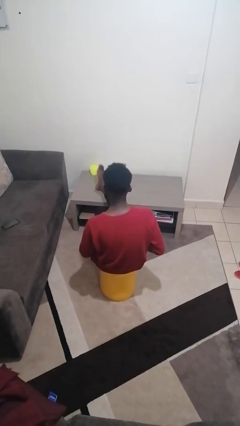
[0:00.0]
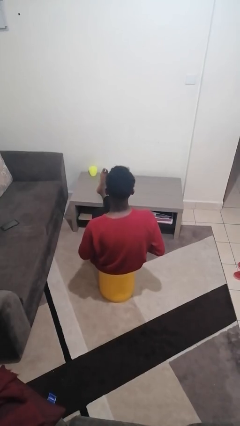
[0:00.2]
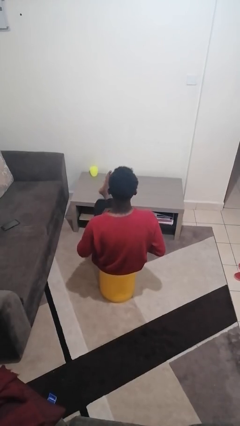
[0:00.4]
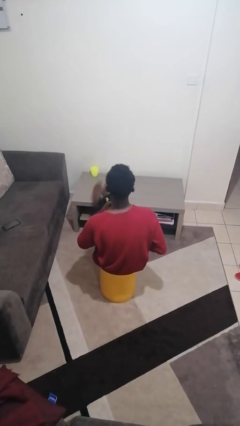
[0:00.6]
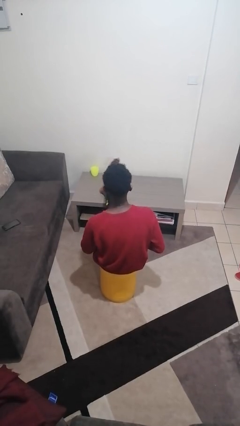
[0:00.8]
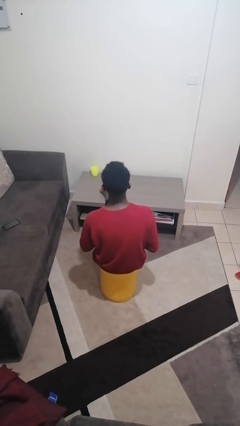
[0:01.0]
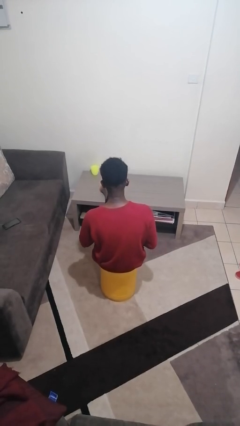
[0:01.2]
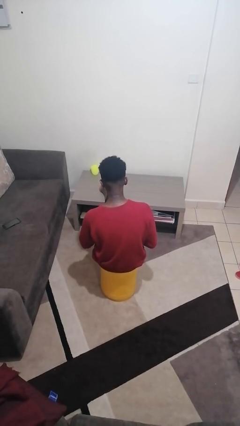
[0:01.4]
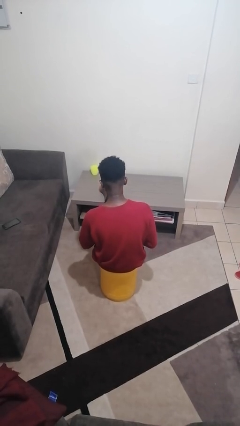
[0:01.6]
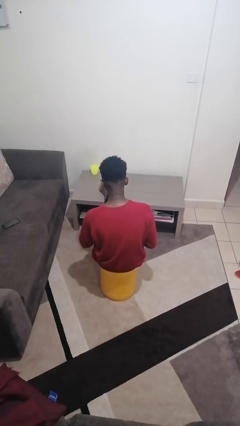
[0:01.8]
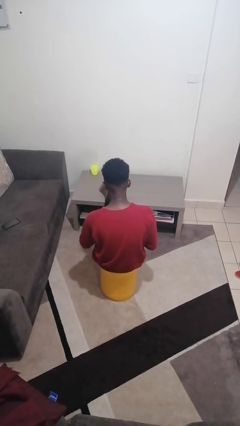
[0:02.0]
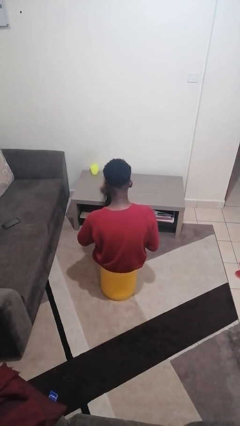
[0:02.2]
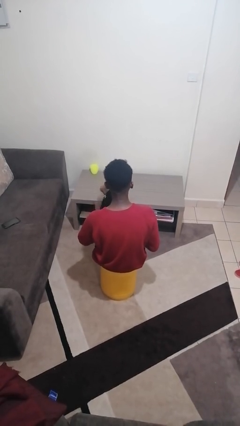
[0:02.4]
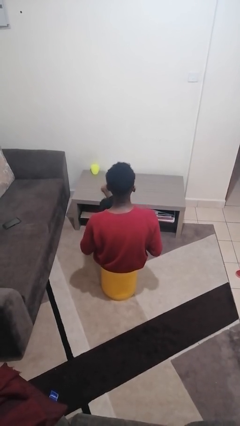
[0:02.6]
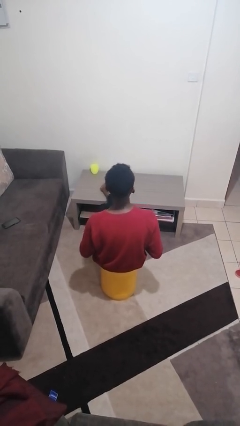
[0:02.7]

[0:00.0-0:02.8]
person puts feet up

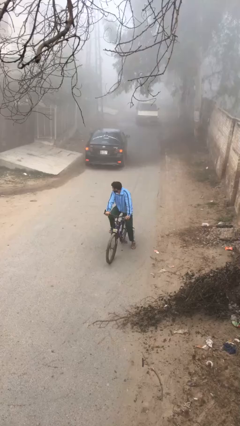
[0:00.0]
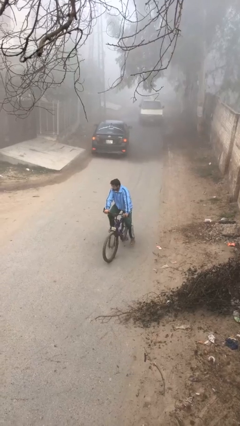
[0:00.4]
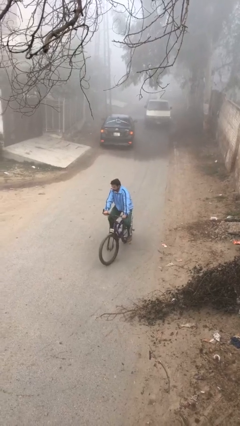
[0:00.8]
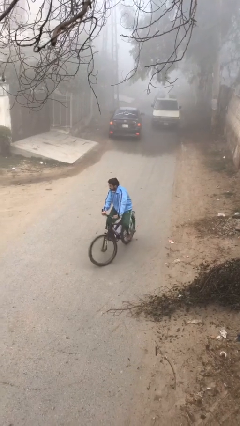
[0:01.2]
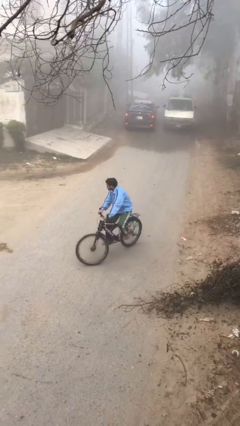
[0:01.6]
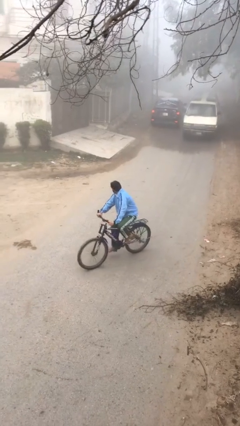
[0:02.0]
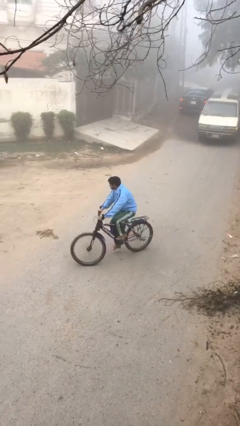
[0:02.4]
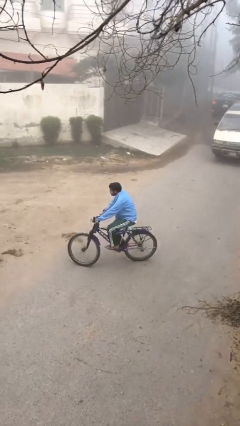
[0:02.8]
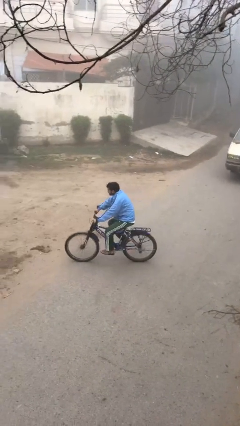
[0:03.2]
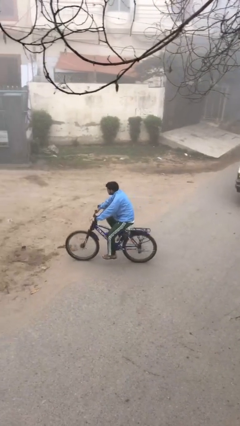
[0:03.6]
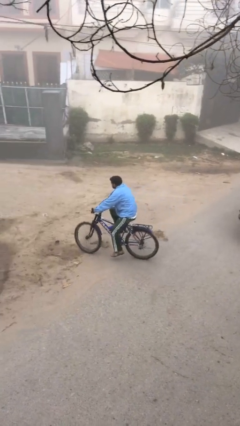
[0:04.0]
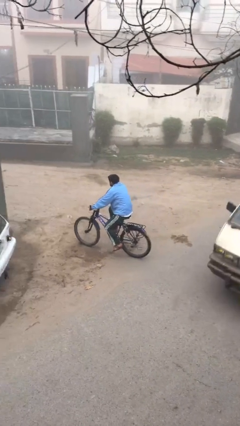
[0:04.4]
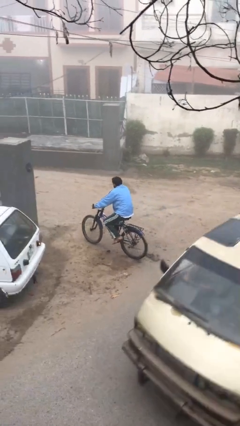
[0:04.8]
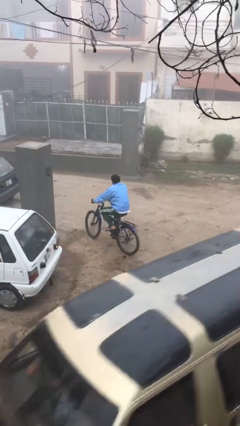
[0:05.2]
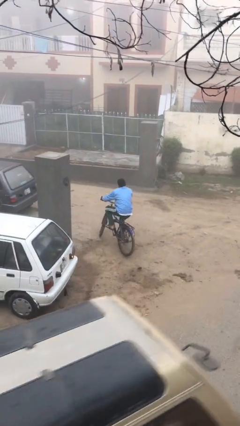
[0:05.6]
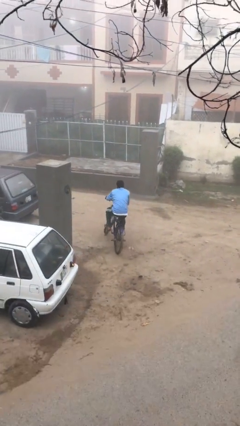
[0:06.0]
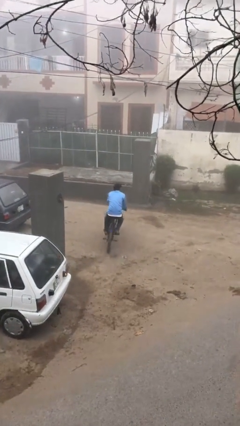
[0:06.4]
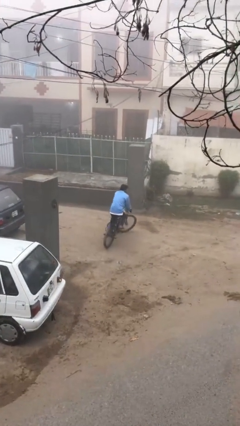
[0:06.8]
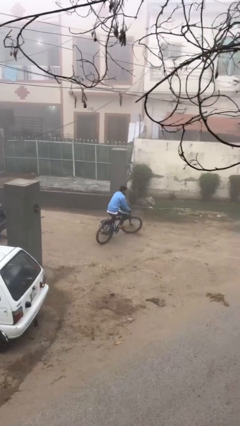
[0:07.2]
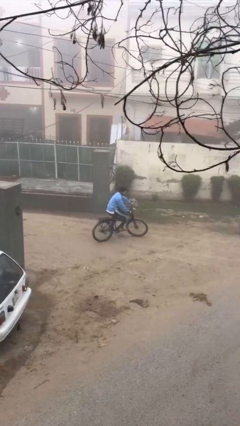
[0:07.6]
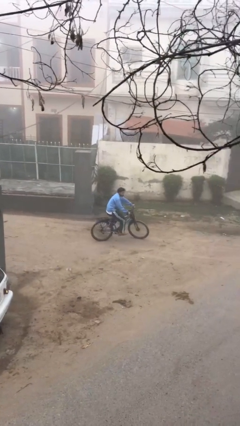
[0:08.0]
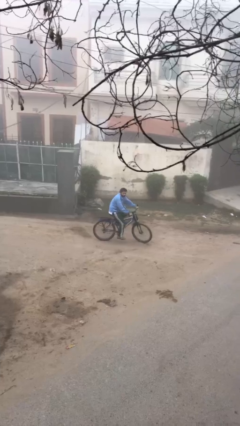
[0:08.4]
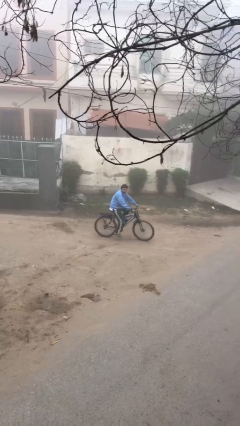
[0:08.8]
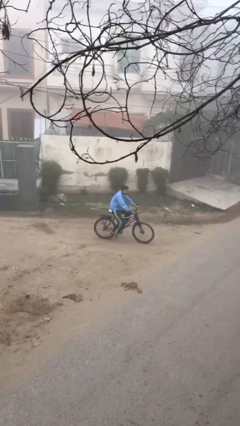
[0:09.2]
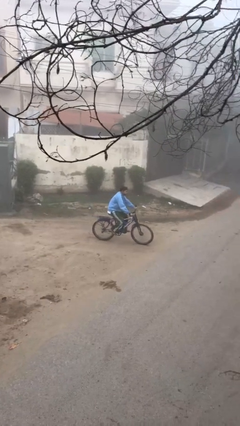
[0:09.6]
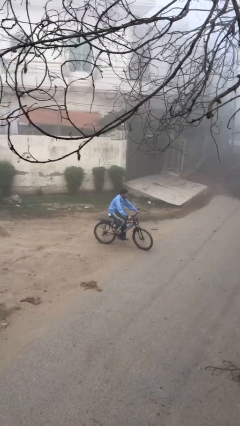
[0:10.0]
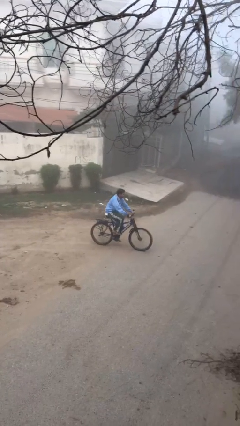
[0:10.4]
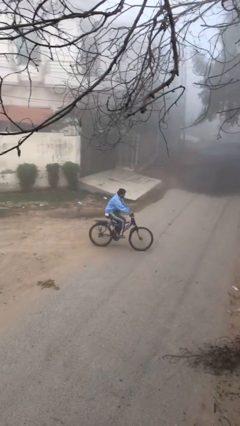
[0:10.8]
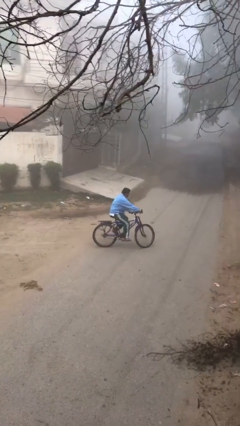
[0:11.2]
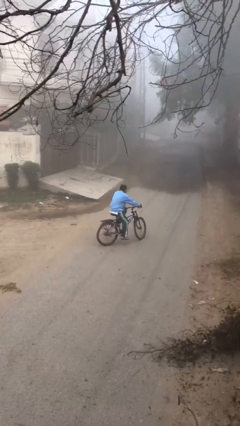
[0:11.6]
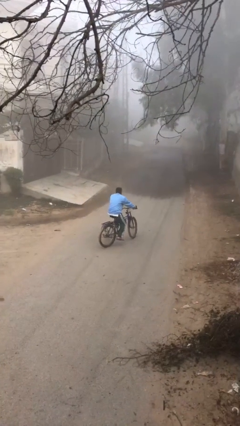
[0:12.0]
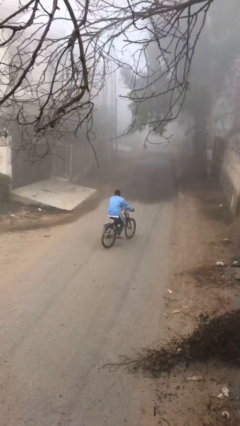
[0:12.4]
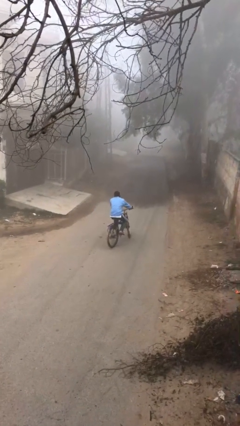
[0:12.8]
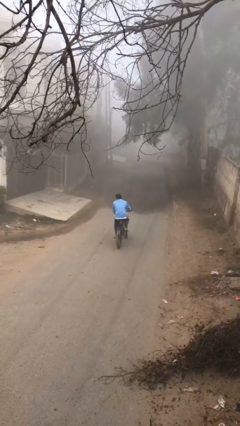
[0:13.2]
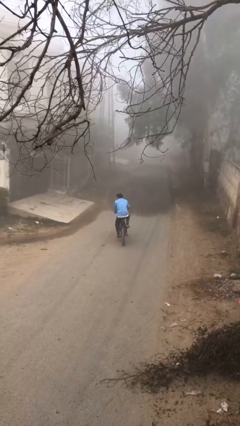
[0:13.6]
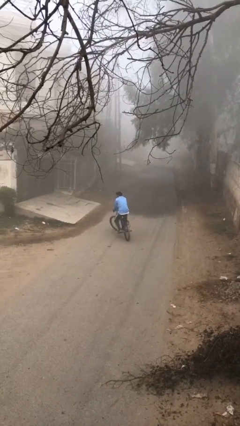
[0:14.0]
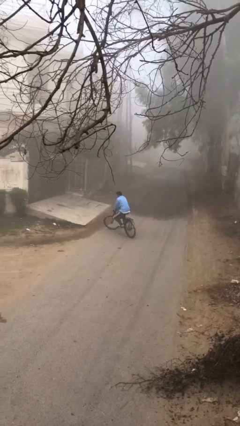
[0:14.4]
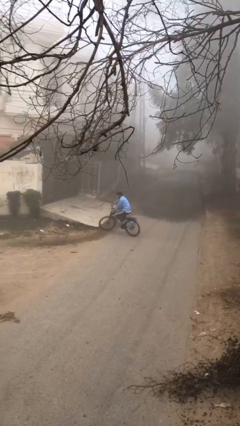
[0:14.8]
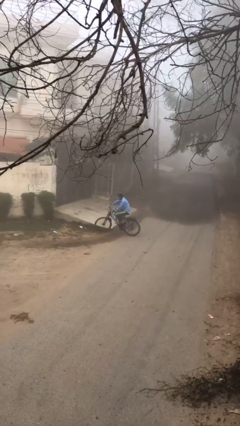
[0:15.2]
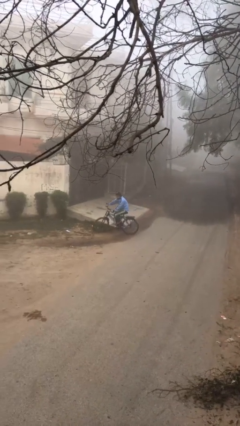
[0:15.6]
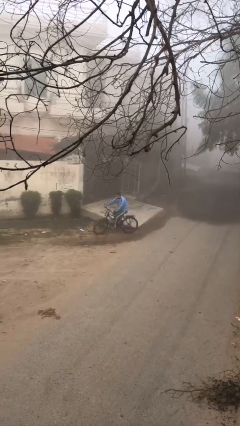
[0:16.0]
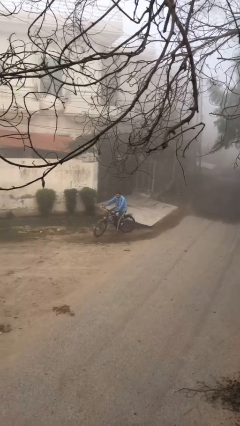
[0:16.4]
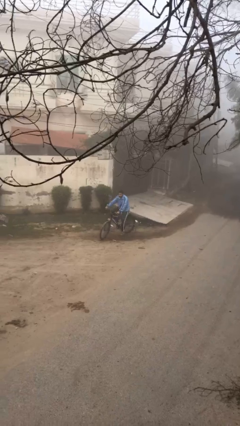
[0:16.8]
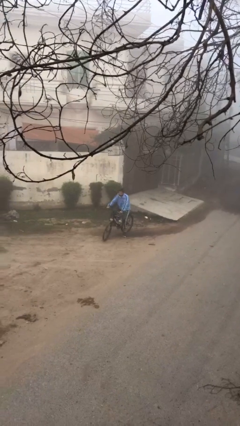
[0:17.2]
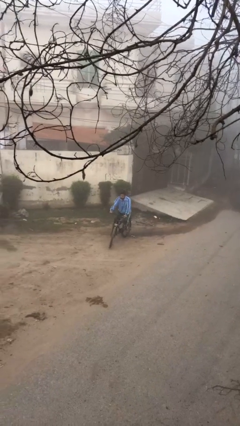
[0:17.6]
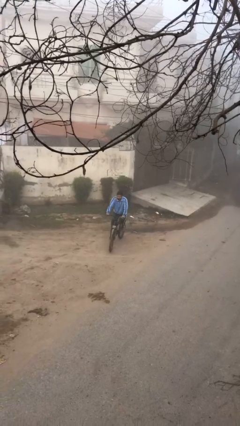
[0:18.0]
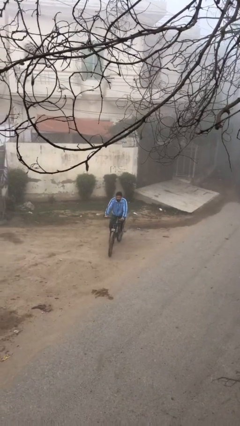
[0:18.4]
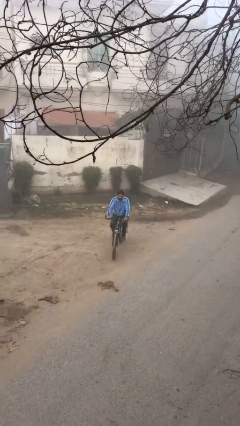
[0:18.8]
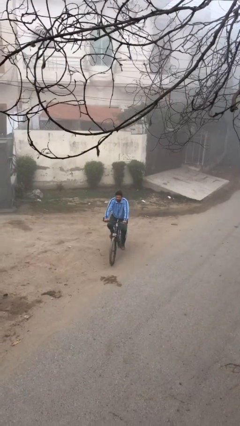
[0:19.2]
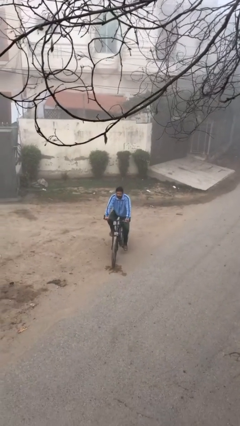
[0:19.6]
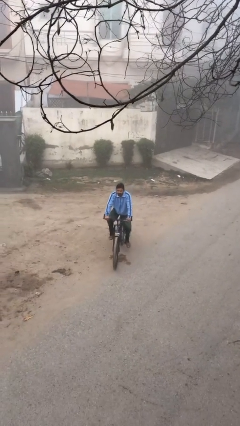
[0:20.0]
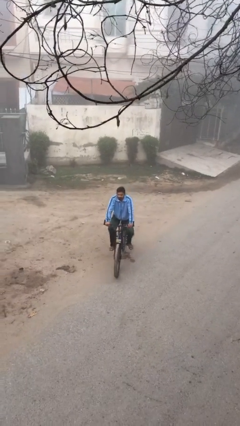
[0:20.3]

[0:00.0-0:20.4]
person rides bicycle

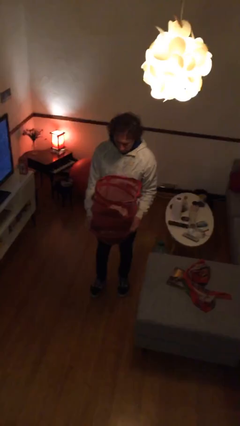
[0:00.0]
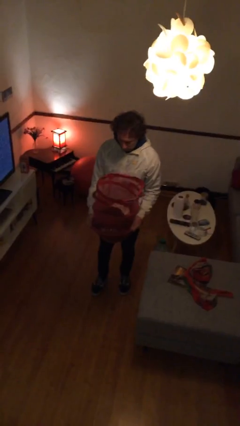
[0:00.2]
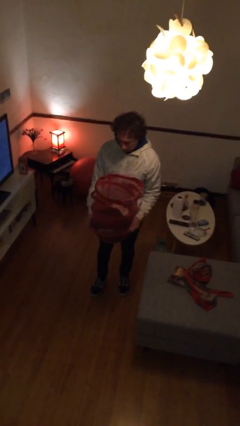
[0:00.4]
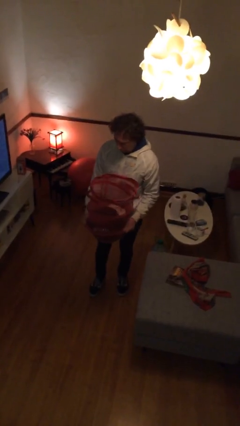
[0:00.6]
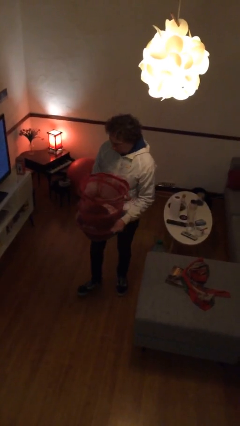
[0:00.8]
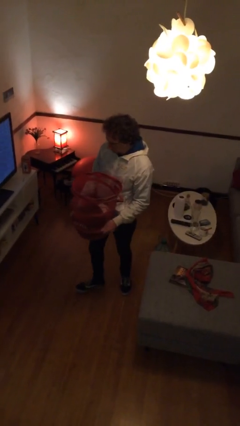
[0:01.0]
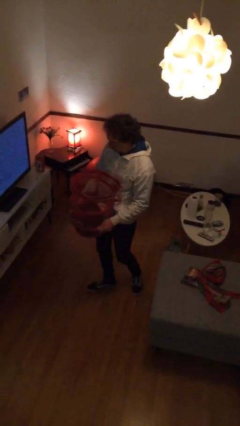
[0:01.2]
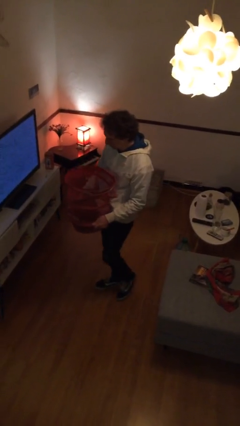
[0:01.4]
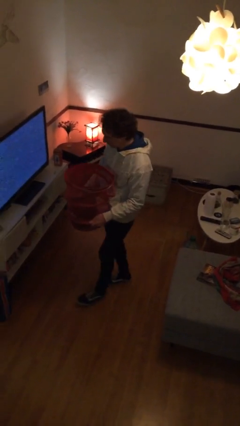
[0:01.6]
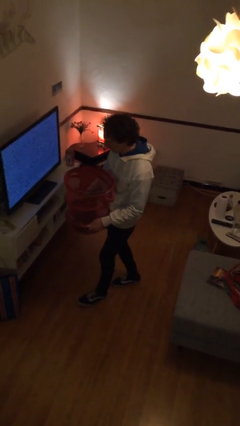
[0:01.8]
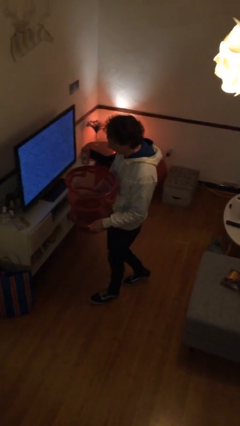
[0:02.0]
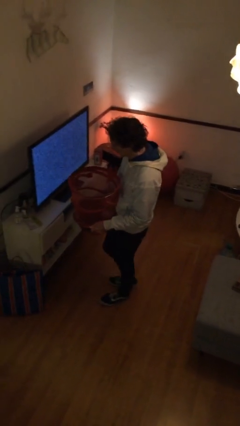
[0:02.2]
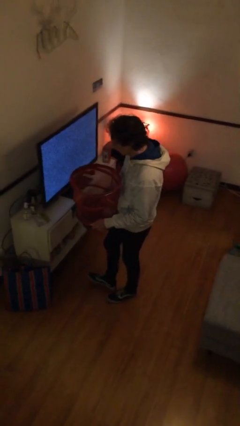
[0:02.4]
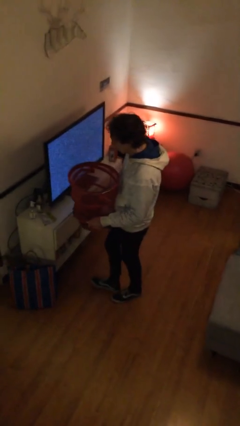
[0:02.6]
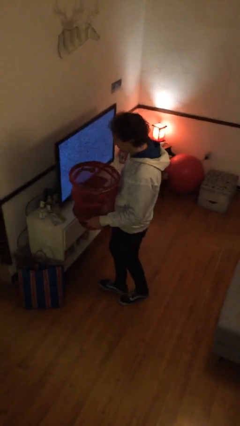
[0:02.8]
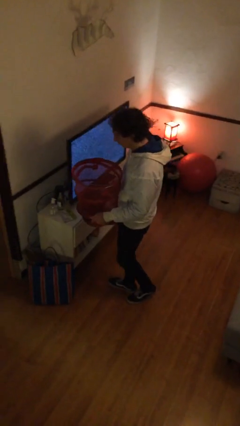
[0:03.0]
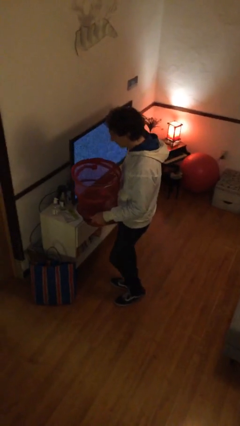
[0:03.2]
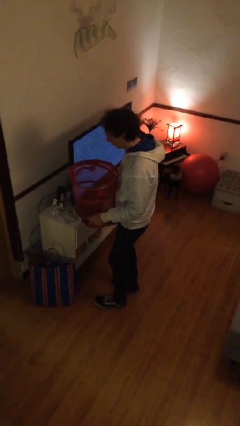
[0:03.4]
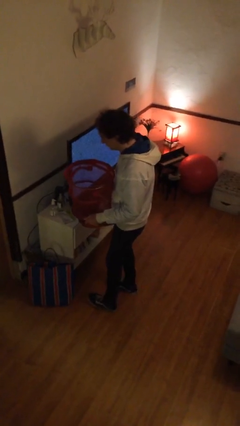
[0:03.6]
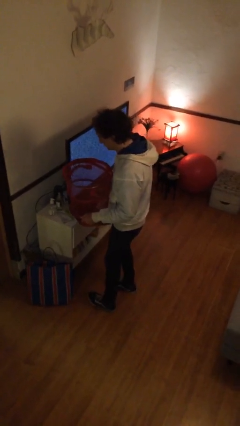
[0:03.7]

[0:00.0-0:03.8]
person carries laundry basket

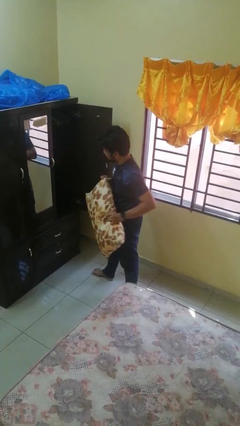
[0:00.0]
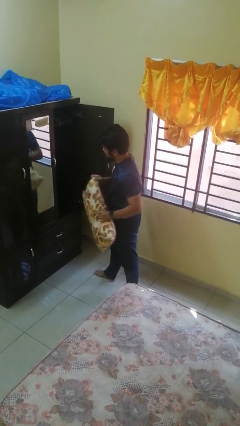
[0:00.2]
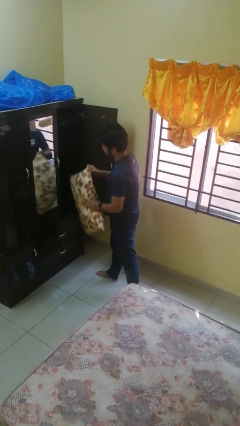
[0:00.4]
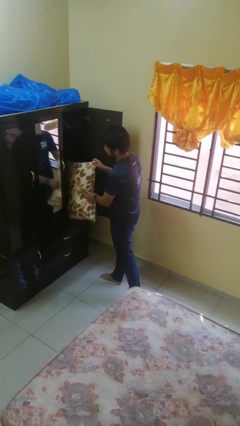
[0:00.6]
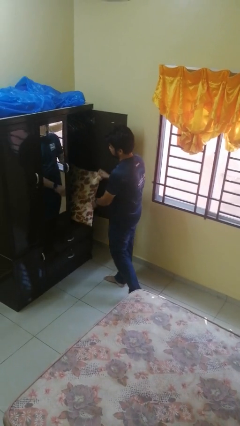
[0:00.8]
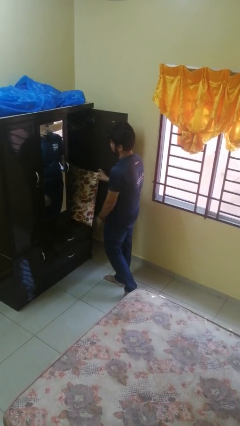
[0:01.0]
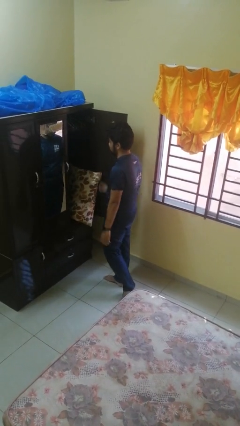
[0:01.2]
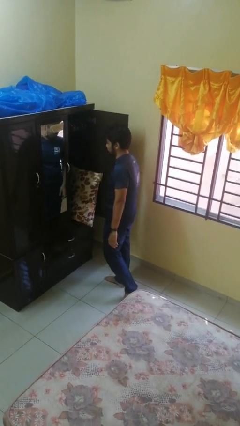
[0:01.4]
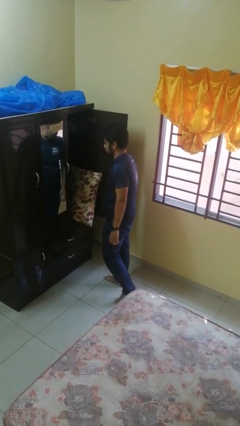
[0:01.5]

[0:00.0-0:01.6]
person puts down object into cabinet
